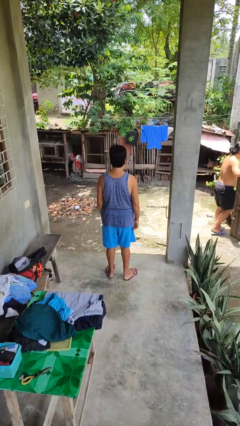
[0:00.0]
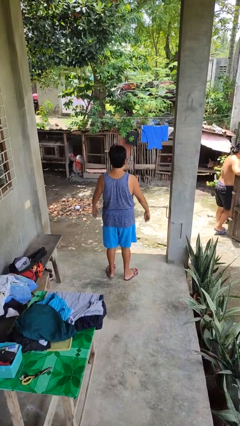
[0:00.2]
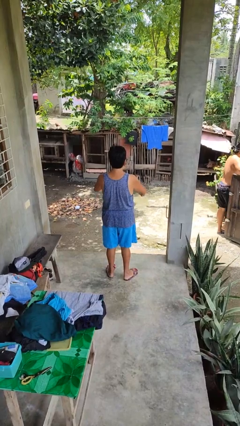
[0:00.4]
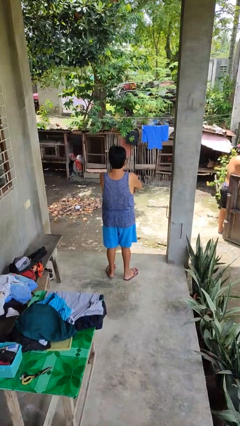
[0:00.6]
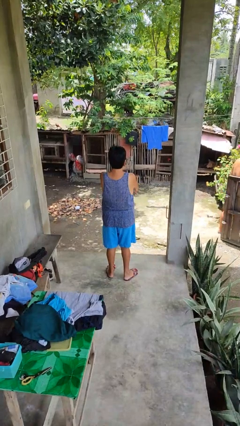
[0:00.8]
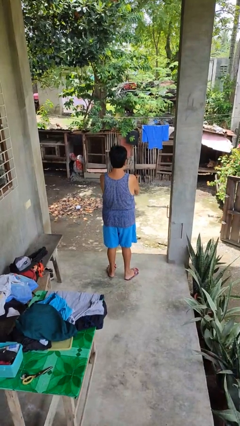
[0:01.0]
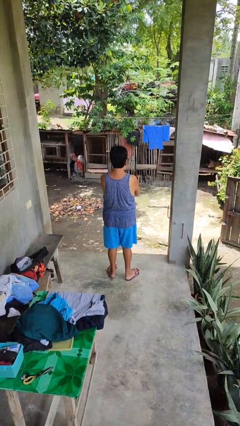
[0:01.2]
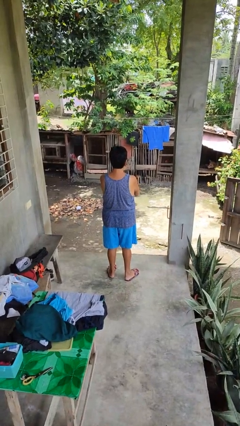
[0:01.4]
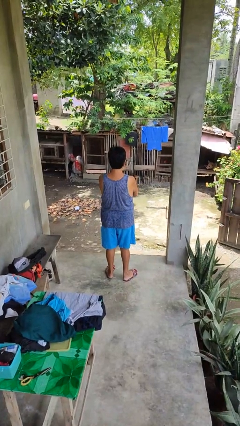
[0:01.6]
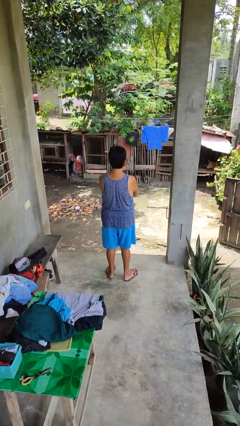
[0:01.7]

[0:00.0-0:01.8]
person crosses arms

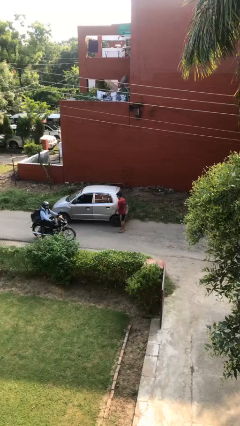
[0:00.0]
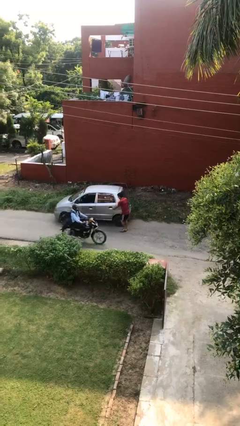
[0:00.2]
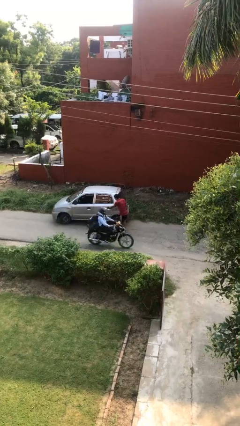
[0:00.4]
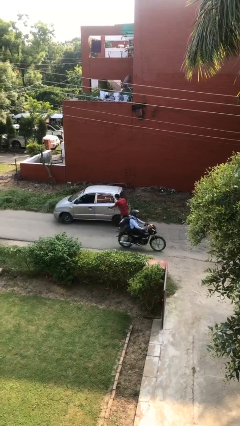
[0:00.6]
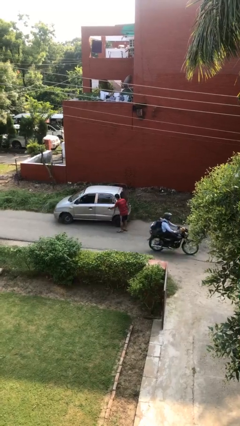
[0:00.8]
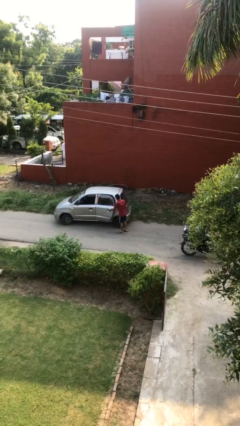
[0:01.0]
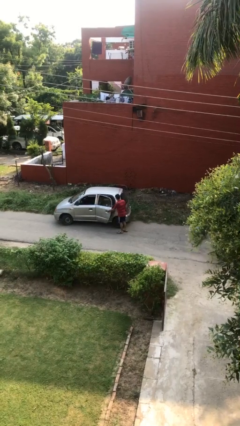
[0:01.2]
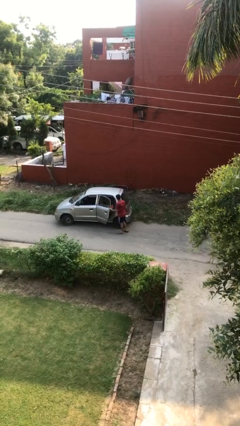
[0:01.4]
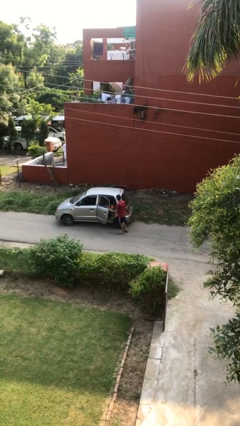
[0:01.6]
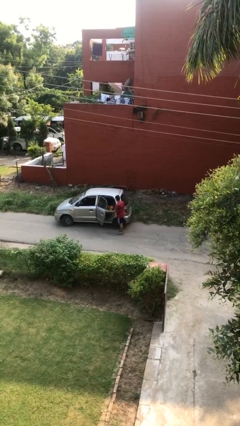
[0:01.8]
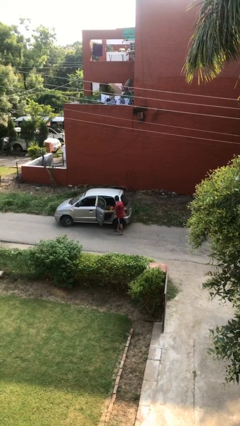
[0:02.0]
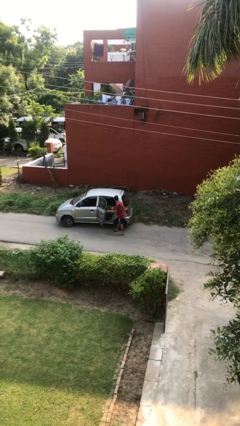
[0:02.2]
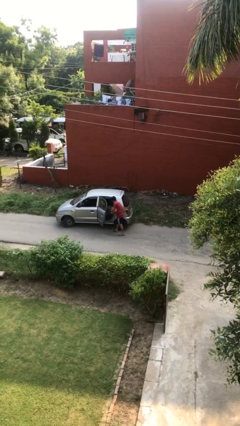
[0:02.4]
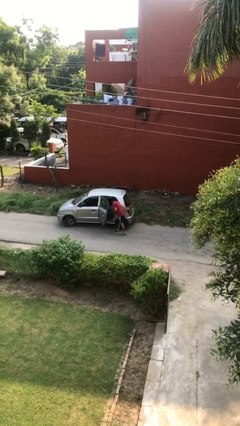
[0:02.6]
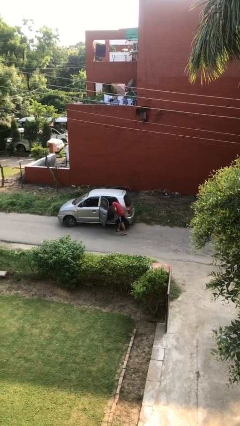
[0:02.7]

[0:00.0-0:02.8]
person opens car door

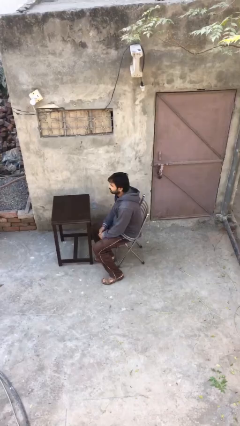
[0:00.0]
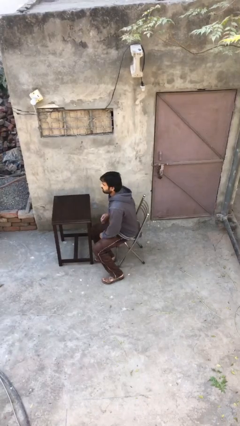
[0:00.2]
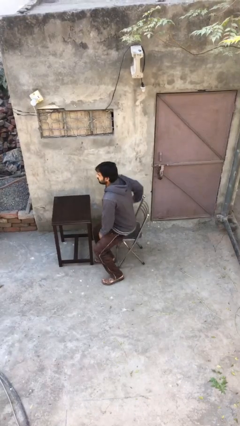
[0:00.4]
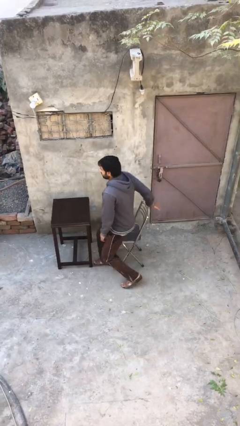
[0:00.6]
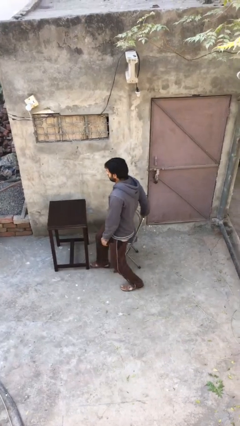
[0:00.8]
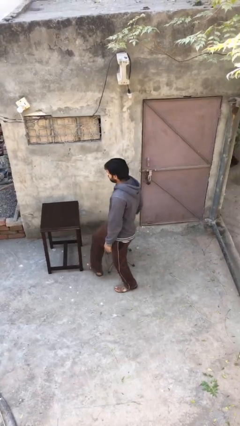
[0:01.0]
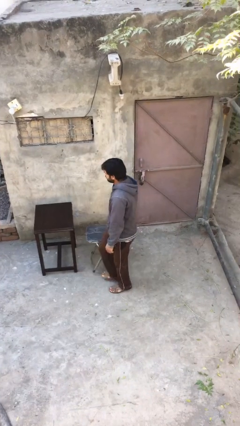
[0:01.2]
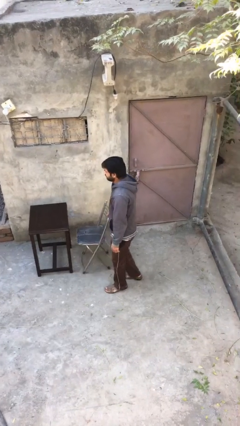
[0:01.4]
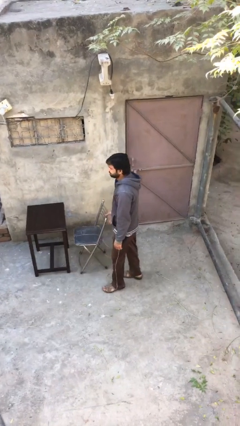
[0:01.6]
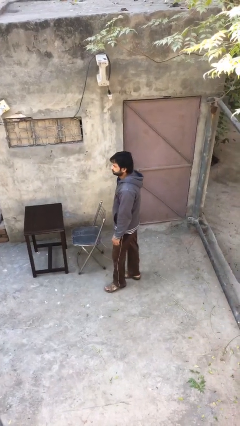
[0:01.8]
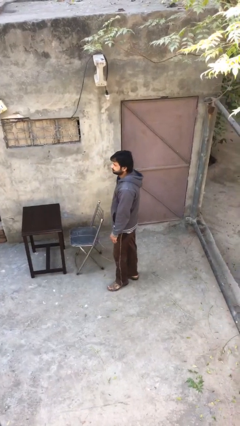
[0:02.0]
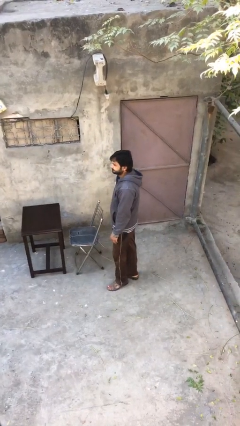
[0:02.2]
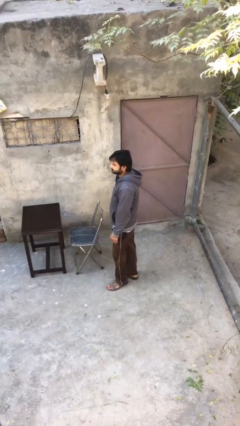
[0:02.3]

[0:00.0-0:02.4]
person stands up

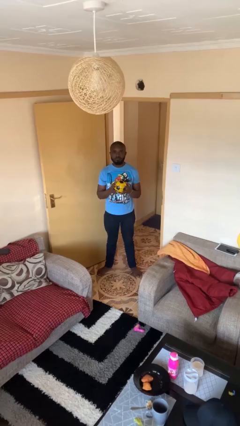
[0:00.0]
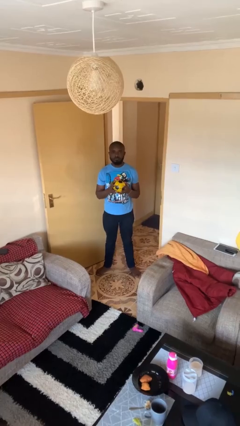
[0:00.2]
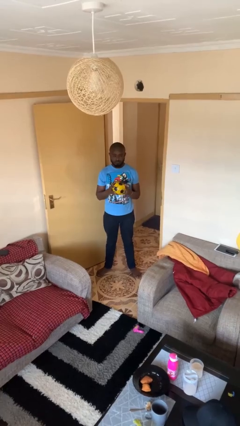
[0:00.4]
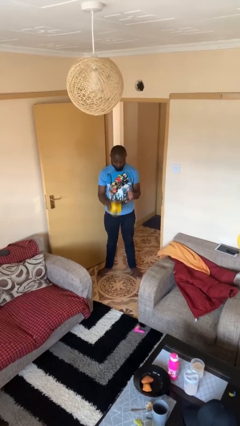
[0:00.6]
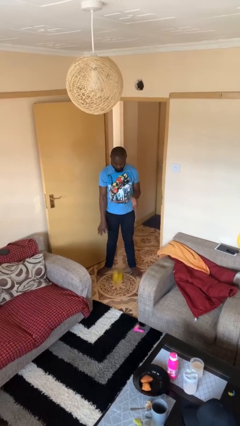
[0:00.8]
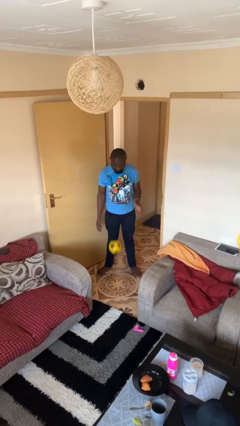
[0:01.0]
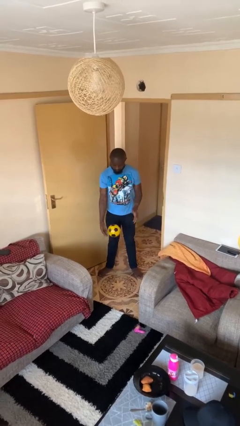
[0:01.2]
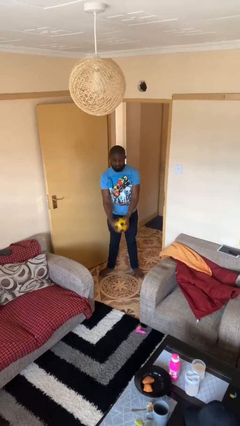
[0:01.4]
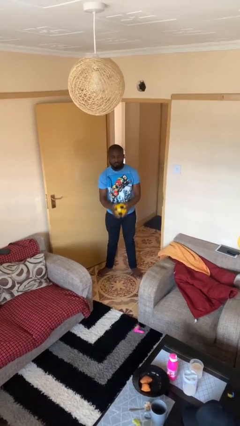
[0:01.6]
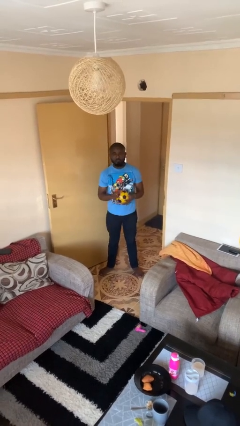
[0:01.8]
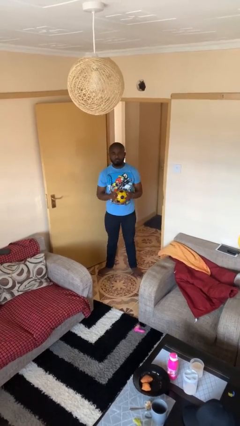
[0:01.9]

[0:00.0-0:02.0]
person bounces ball on floor

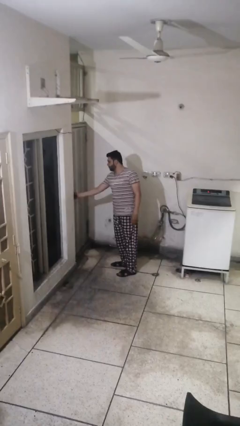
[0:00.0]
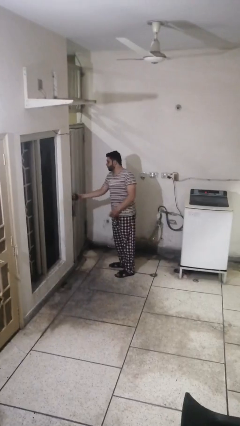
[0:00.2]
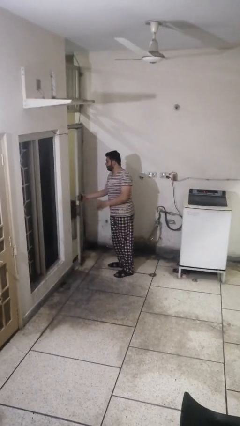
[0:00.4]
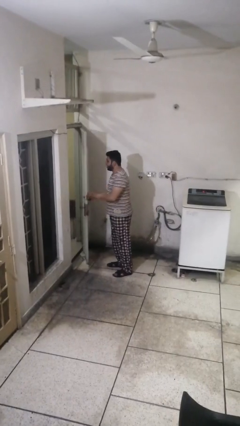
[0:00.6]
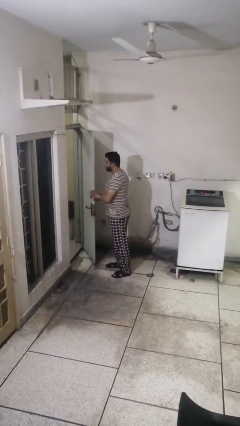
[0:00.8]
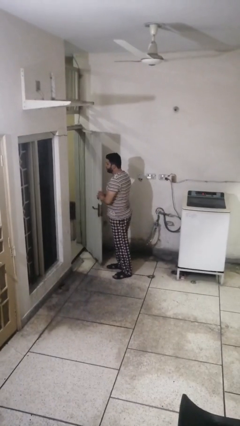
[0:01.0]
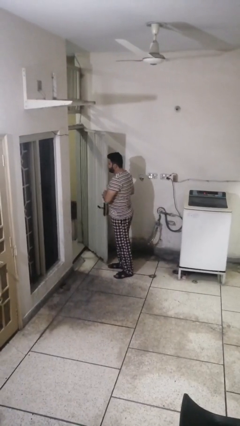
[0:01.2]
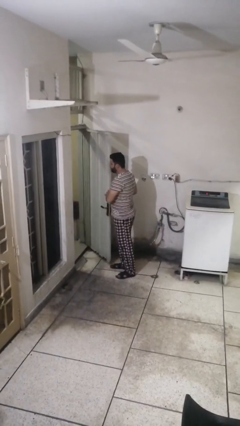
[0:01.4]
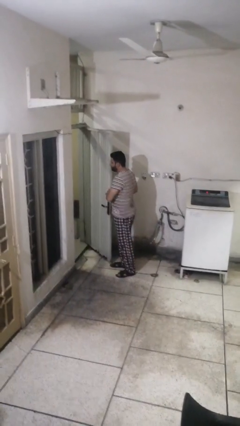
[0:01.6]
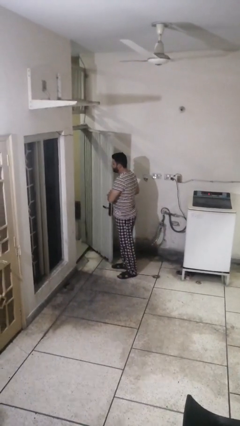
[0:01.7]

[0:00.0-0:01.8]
person opens facility door

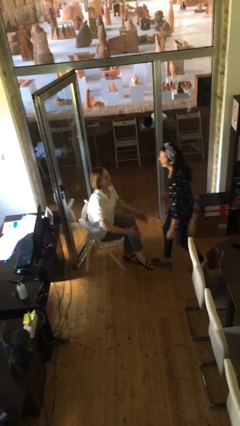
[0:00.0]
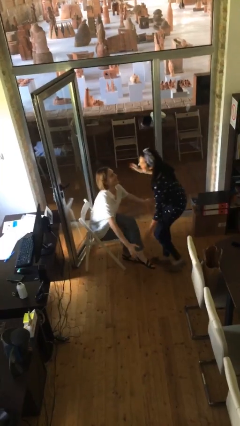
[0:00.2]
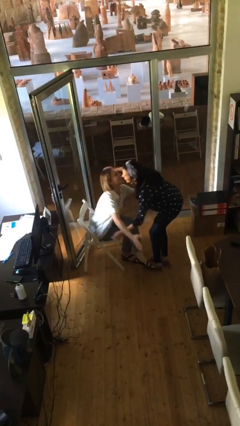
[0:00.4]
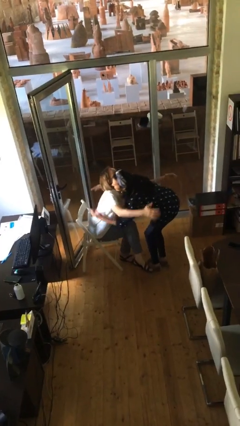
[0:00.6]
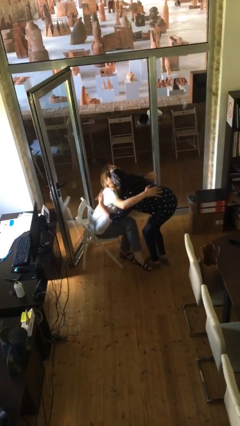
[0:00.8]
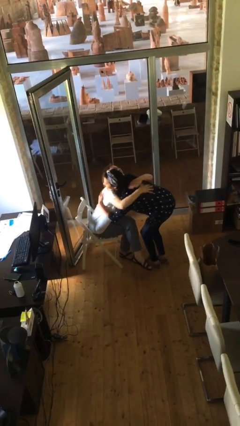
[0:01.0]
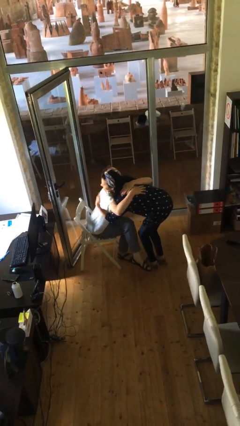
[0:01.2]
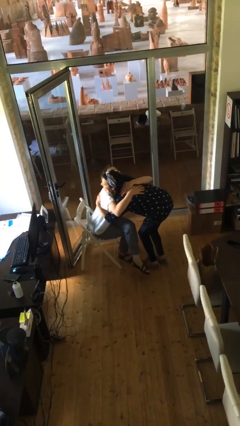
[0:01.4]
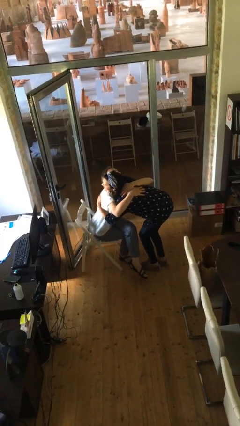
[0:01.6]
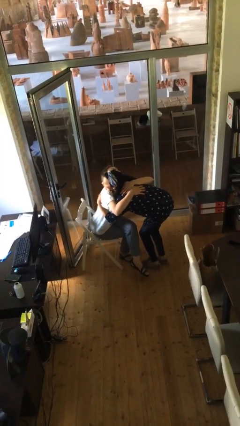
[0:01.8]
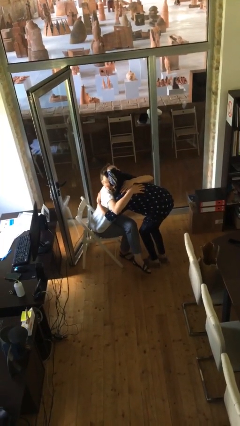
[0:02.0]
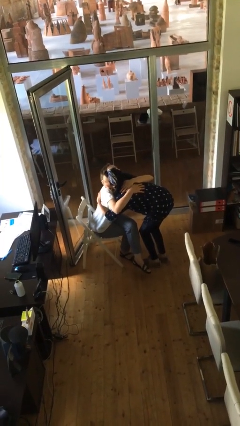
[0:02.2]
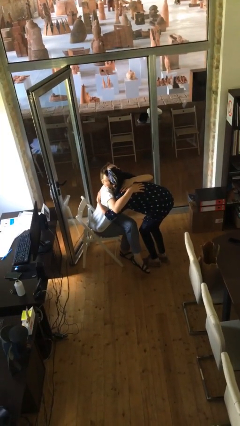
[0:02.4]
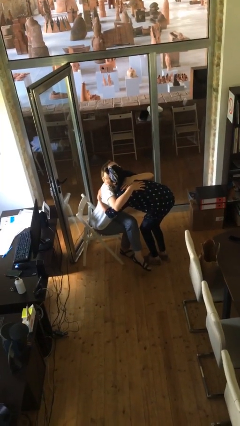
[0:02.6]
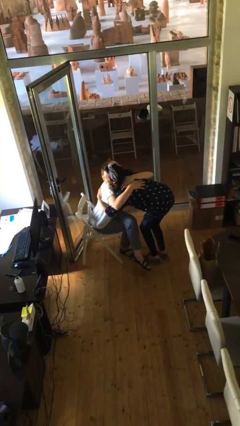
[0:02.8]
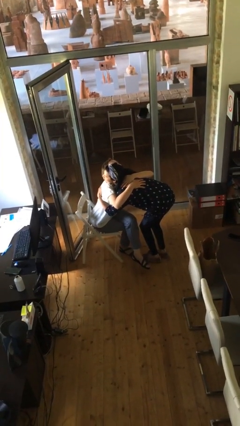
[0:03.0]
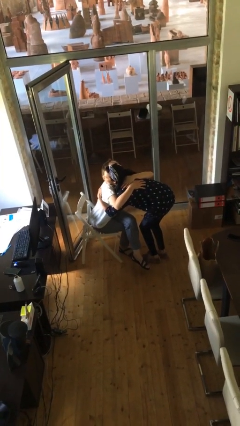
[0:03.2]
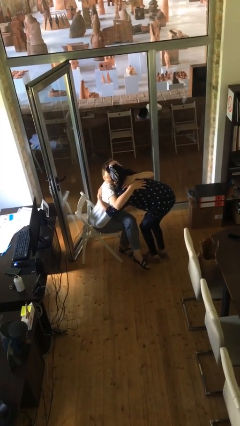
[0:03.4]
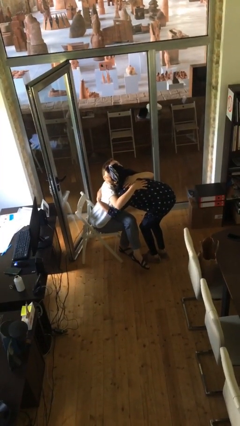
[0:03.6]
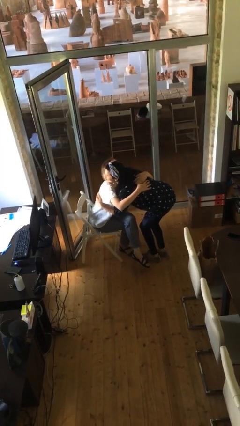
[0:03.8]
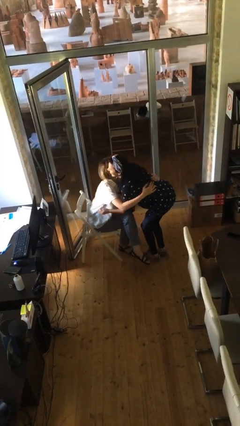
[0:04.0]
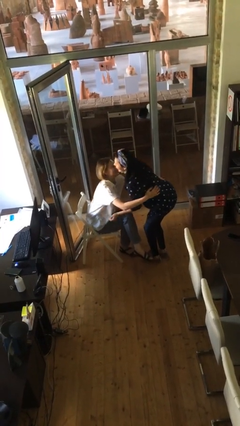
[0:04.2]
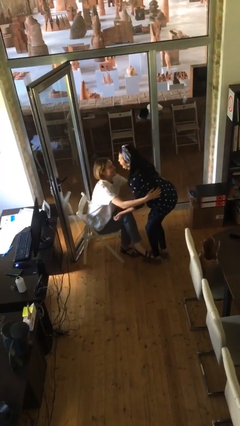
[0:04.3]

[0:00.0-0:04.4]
person embraces person

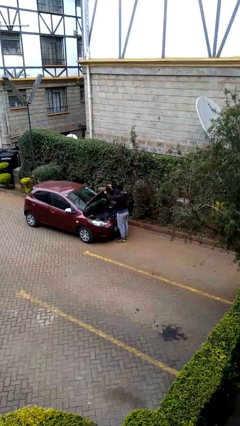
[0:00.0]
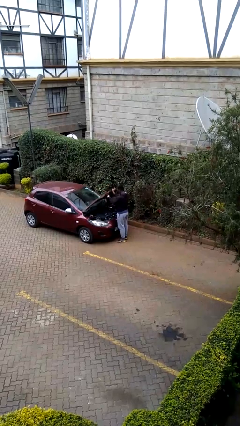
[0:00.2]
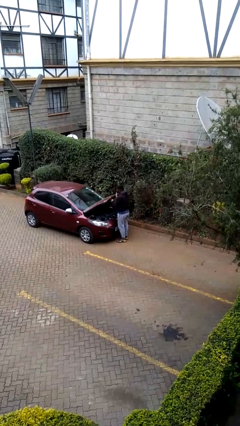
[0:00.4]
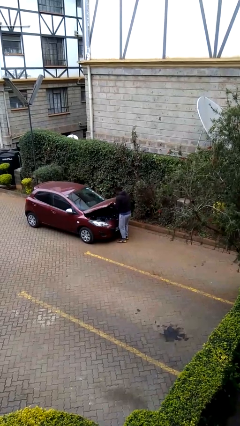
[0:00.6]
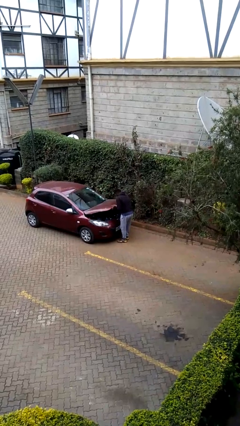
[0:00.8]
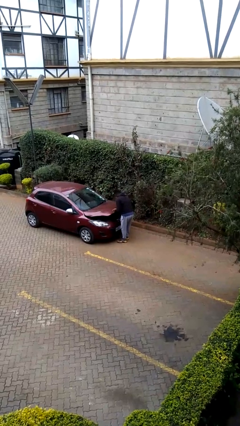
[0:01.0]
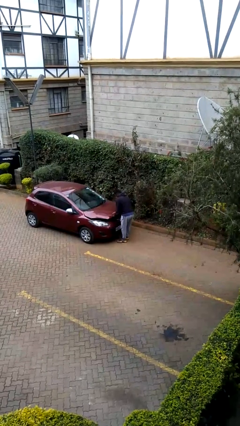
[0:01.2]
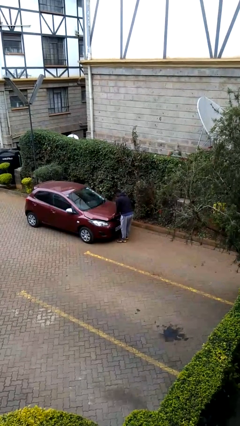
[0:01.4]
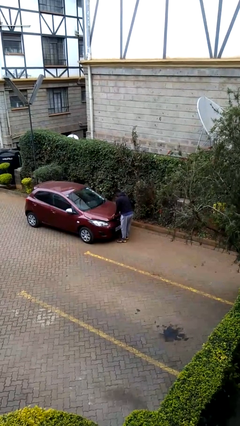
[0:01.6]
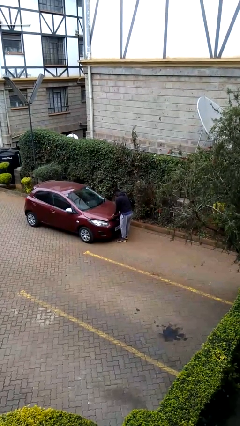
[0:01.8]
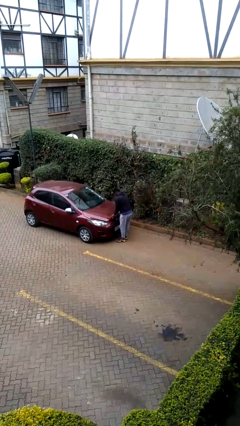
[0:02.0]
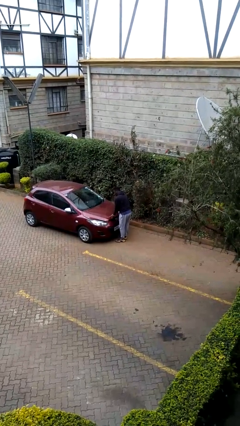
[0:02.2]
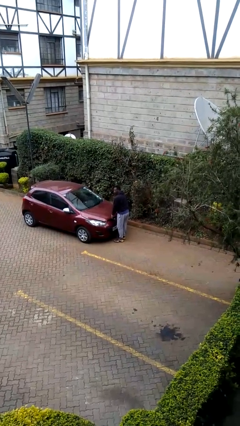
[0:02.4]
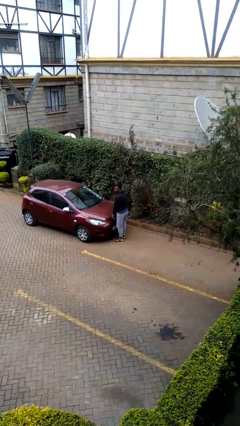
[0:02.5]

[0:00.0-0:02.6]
person closes car hood
